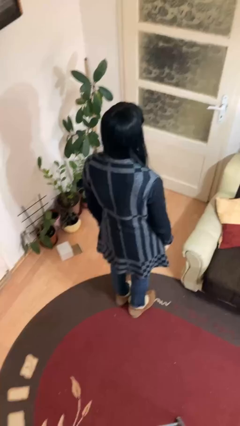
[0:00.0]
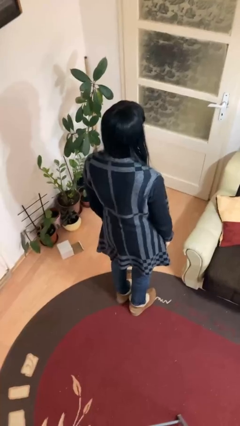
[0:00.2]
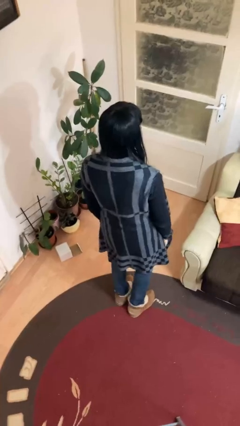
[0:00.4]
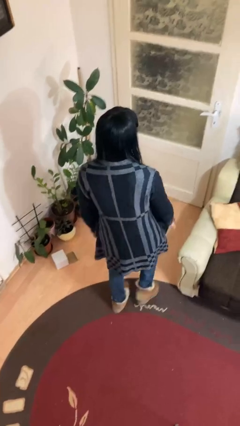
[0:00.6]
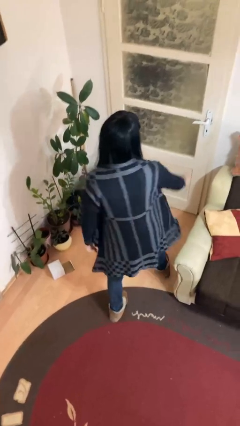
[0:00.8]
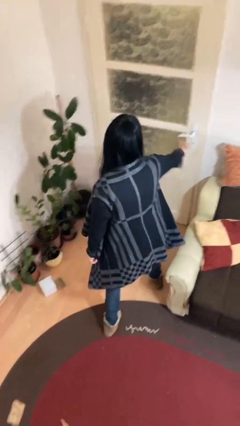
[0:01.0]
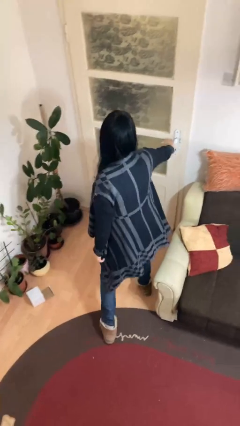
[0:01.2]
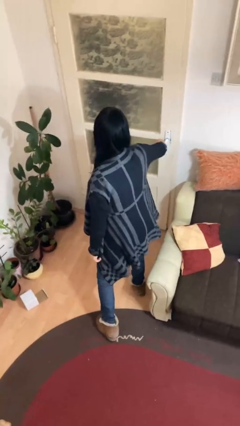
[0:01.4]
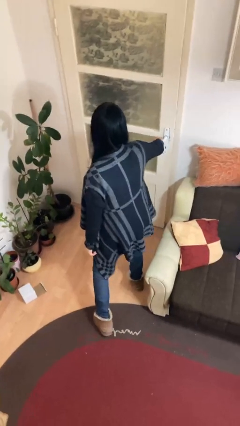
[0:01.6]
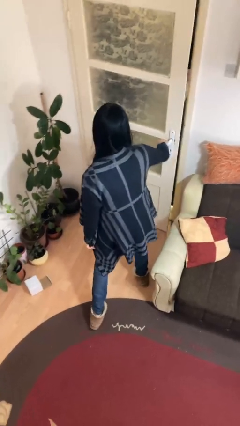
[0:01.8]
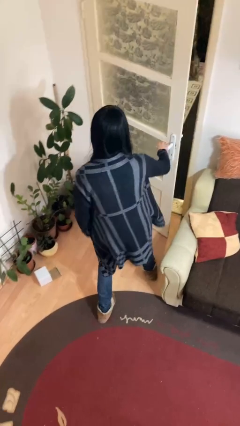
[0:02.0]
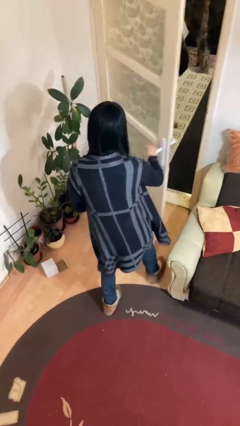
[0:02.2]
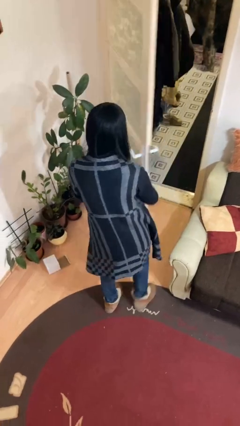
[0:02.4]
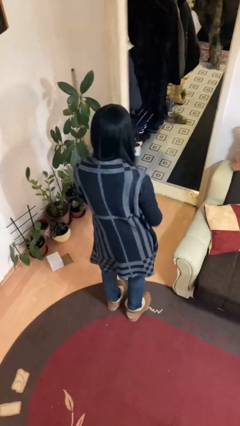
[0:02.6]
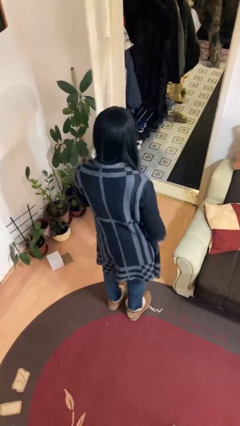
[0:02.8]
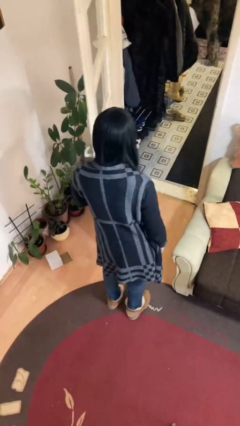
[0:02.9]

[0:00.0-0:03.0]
person opens facility door

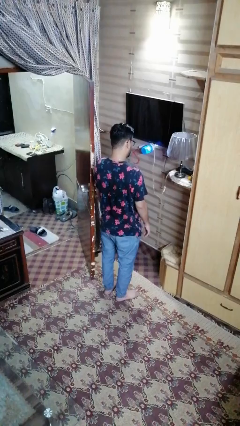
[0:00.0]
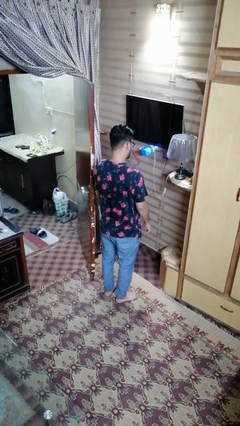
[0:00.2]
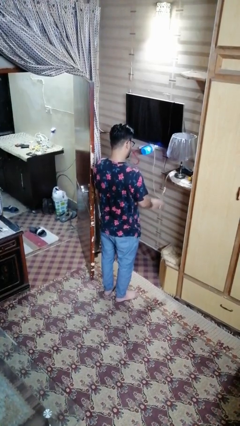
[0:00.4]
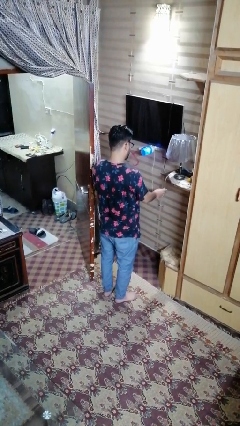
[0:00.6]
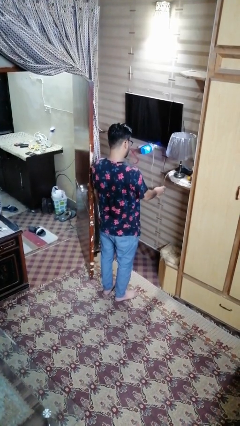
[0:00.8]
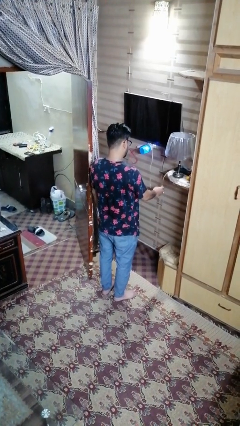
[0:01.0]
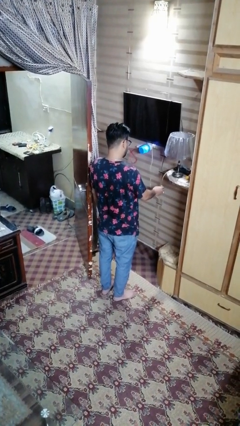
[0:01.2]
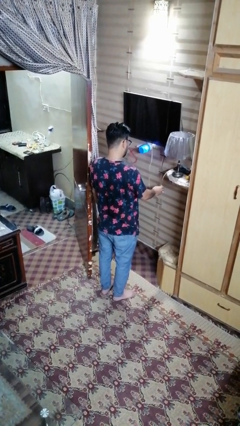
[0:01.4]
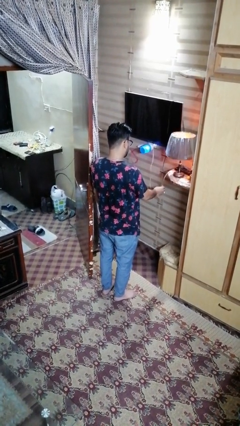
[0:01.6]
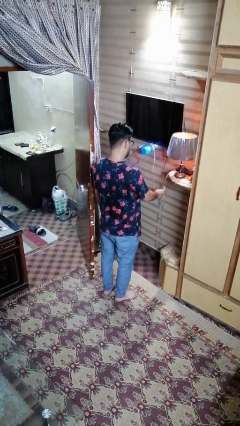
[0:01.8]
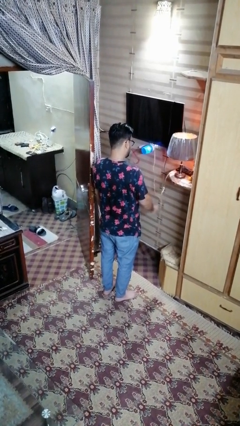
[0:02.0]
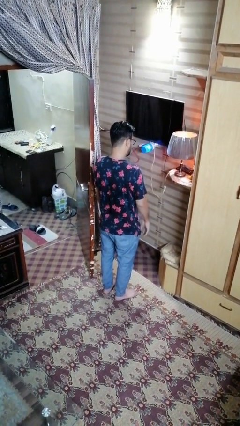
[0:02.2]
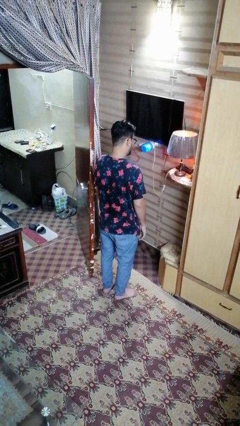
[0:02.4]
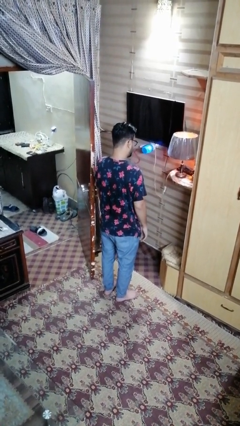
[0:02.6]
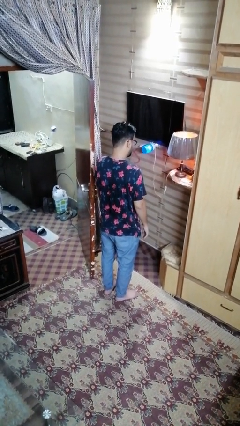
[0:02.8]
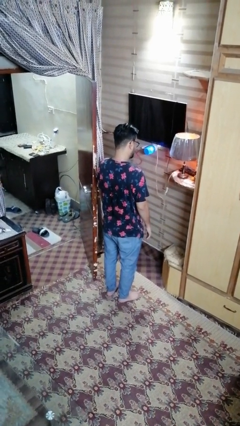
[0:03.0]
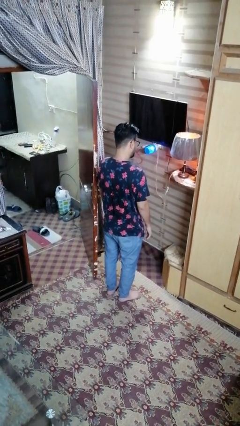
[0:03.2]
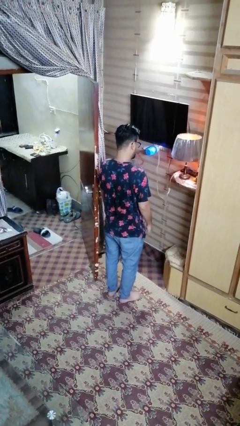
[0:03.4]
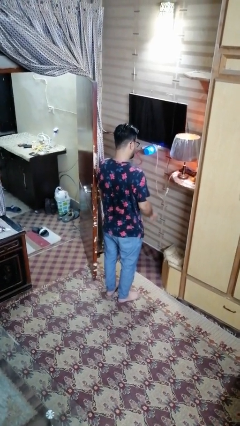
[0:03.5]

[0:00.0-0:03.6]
person turns on lamp

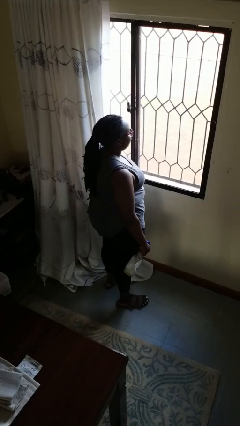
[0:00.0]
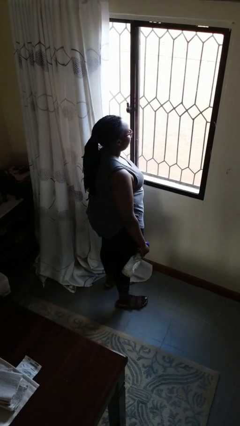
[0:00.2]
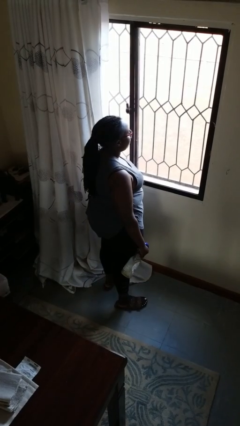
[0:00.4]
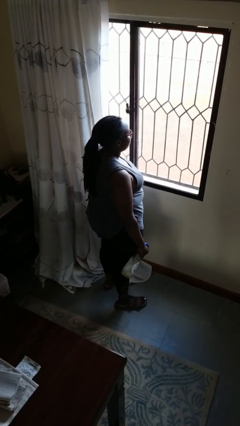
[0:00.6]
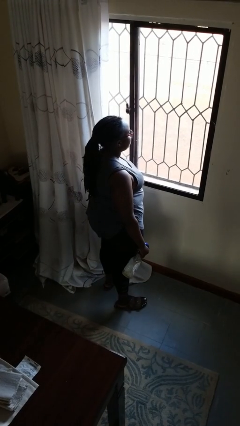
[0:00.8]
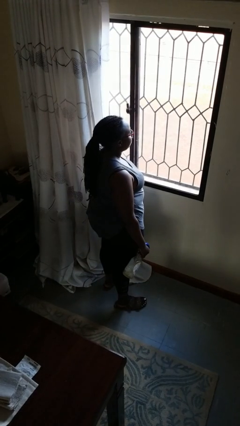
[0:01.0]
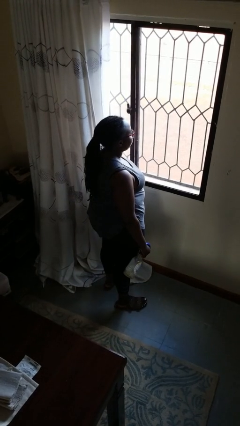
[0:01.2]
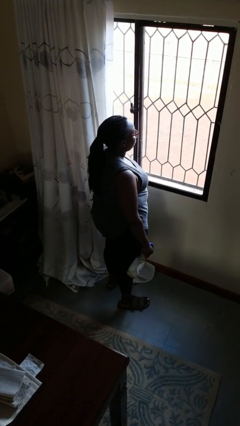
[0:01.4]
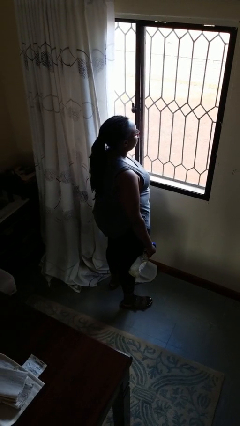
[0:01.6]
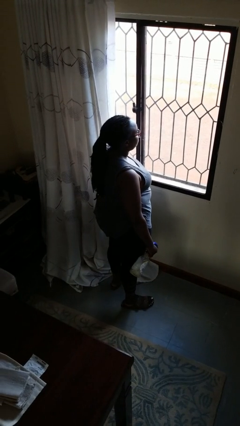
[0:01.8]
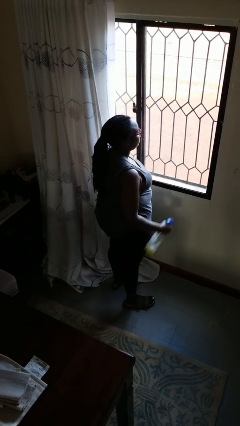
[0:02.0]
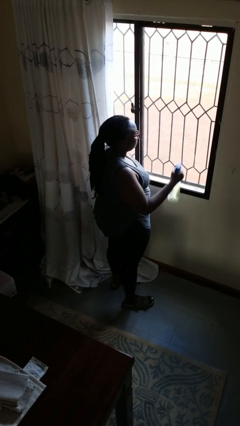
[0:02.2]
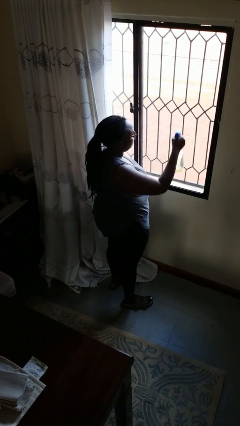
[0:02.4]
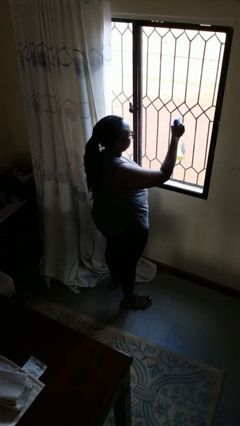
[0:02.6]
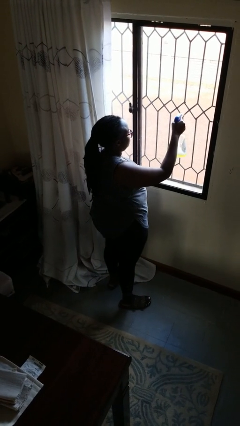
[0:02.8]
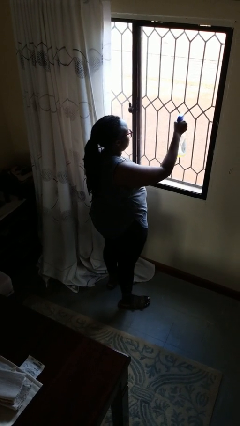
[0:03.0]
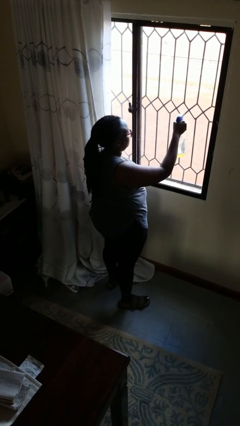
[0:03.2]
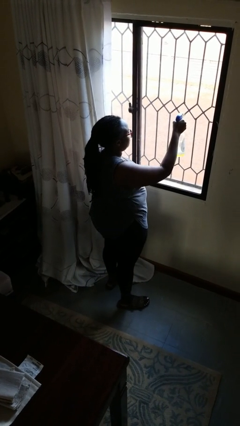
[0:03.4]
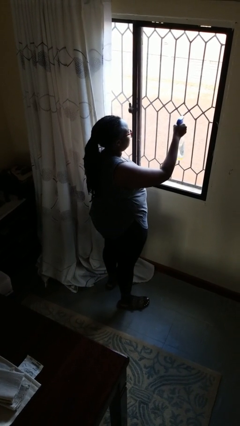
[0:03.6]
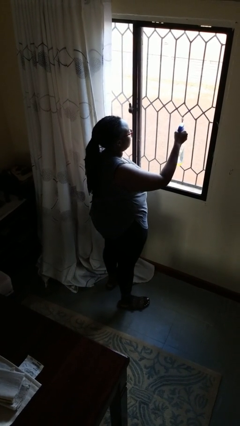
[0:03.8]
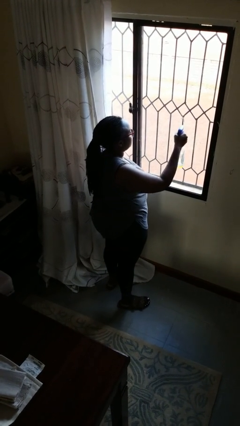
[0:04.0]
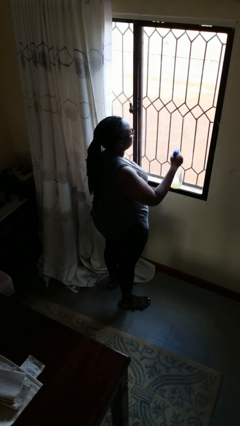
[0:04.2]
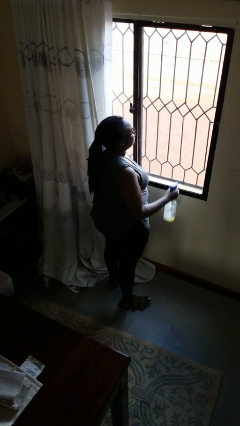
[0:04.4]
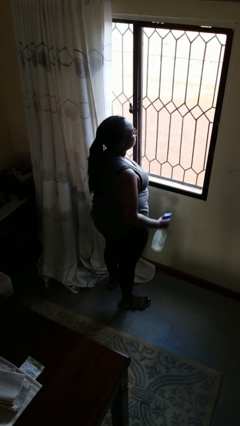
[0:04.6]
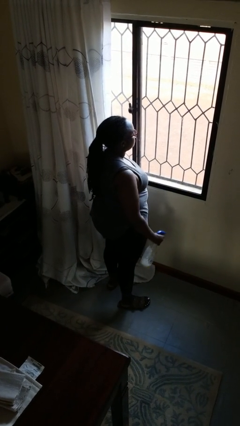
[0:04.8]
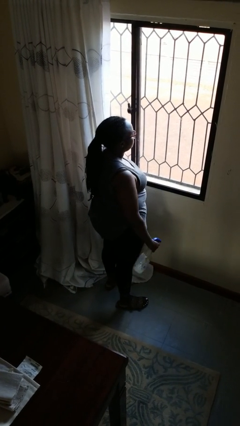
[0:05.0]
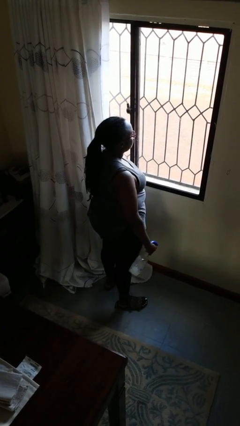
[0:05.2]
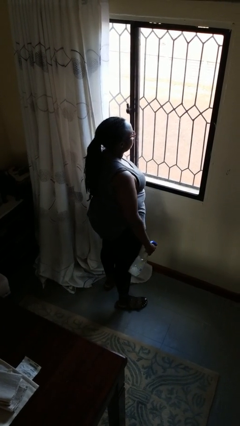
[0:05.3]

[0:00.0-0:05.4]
person sprays from bottle

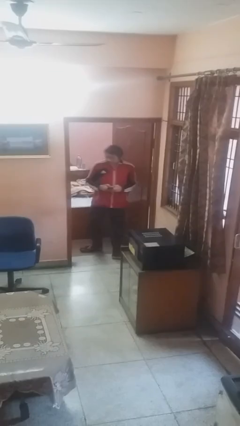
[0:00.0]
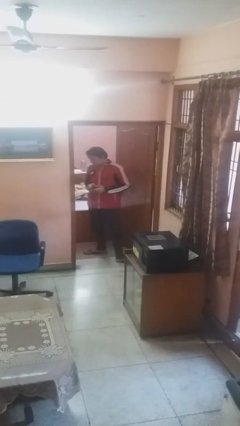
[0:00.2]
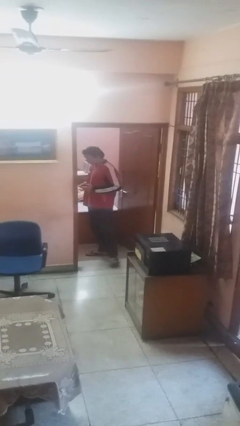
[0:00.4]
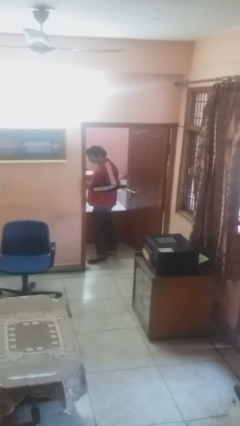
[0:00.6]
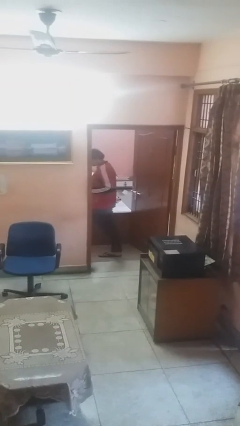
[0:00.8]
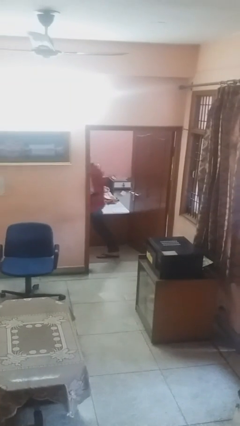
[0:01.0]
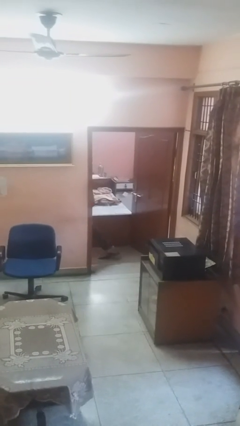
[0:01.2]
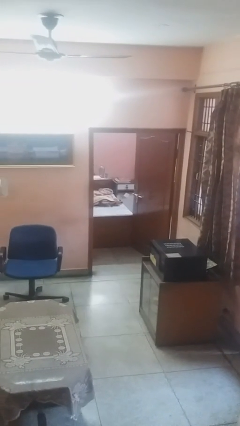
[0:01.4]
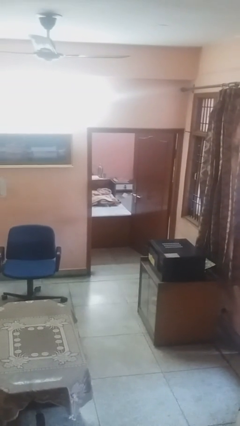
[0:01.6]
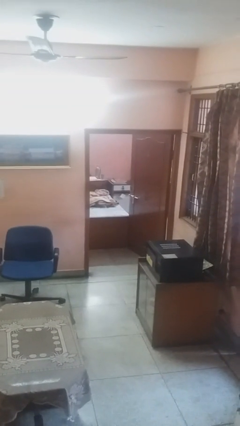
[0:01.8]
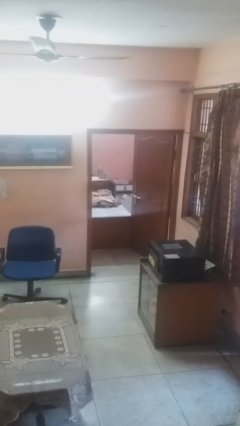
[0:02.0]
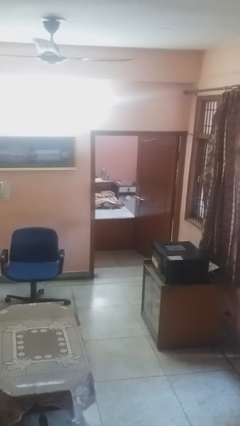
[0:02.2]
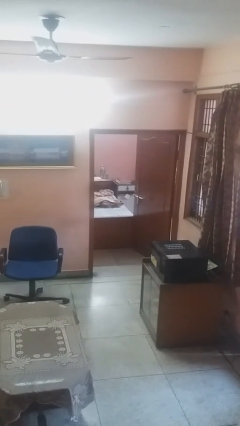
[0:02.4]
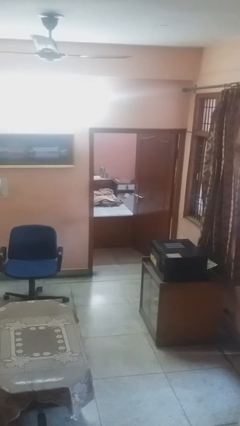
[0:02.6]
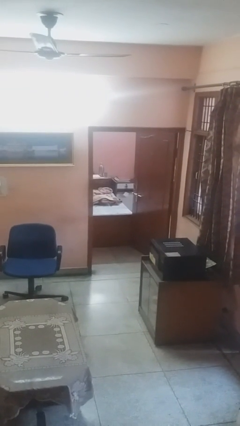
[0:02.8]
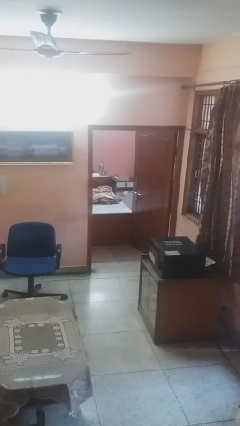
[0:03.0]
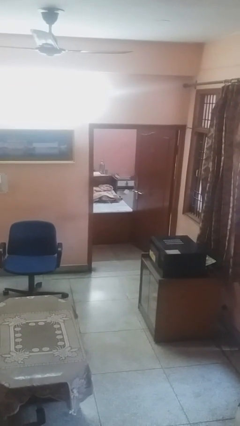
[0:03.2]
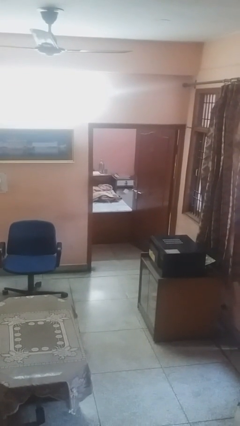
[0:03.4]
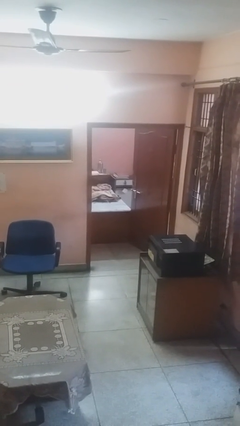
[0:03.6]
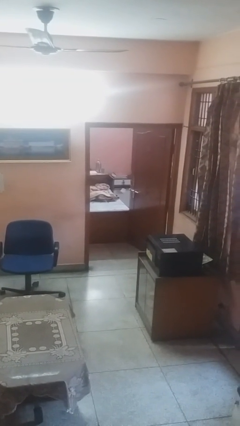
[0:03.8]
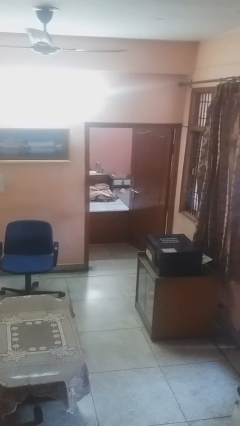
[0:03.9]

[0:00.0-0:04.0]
person exits scene through structure

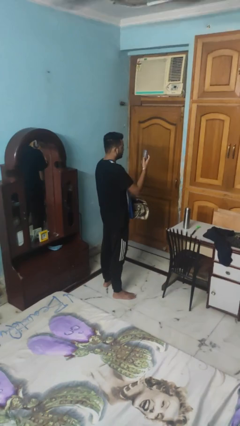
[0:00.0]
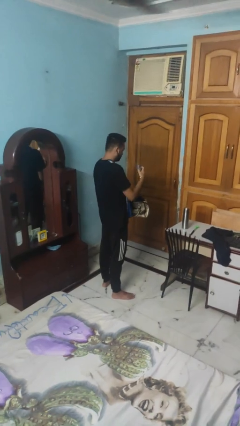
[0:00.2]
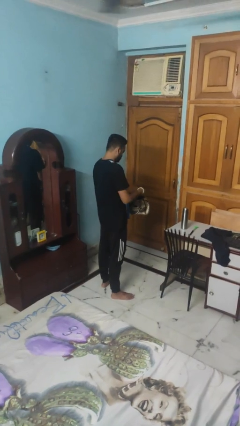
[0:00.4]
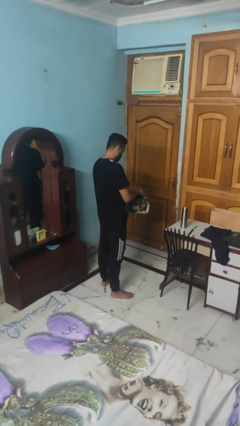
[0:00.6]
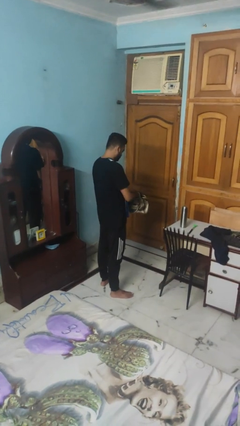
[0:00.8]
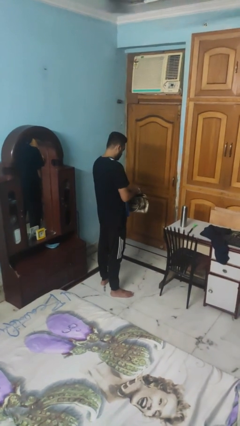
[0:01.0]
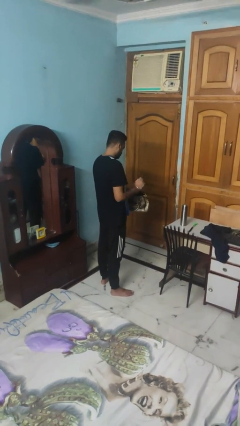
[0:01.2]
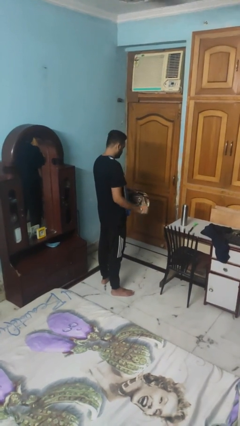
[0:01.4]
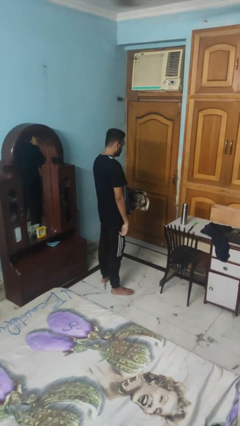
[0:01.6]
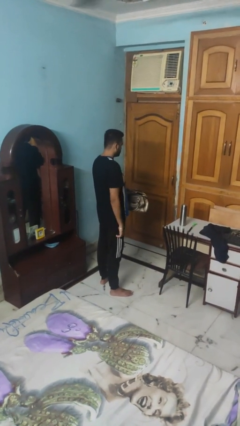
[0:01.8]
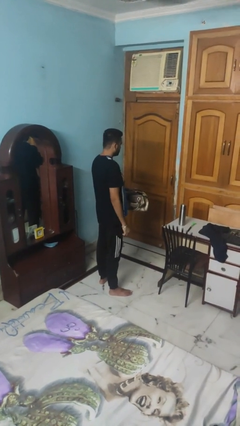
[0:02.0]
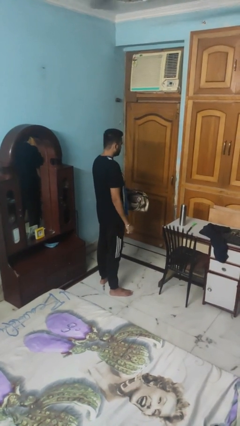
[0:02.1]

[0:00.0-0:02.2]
person puts object into purse
